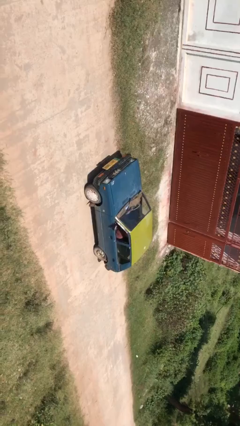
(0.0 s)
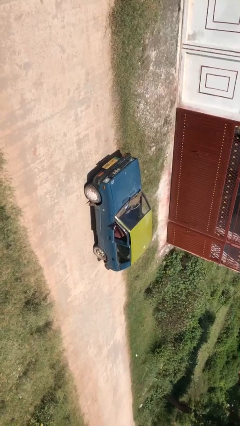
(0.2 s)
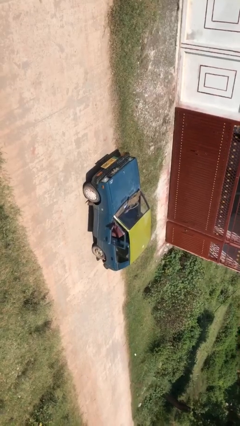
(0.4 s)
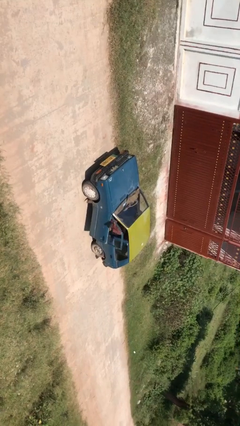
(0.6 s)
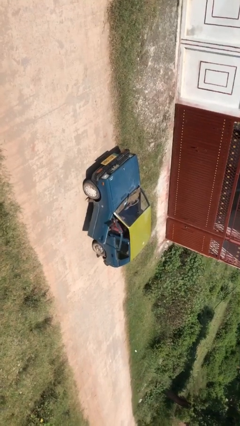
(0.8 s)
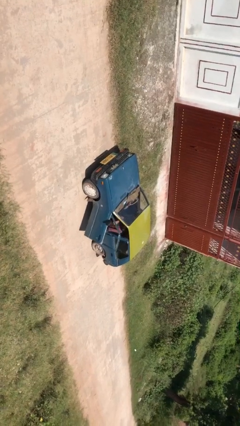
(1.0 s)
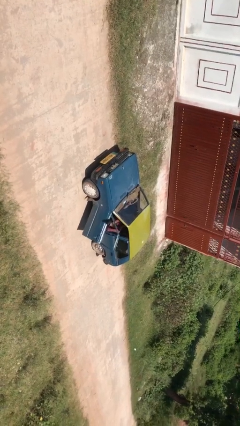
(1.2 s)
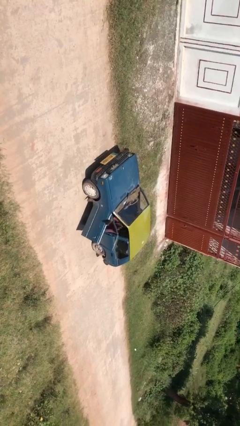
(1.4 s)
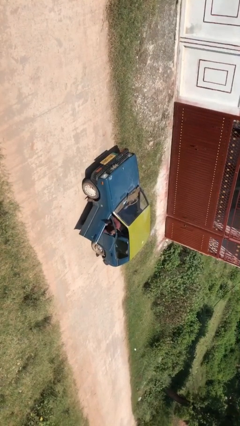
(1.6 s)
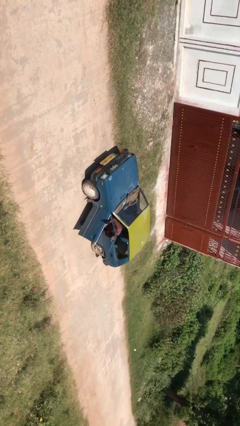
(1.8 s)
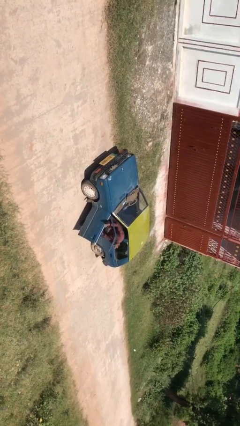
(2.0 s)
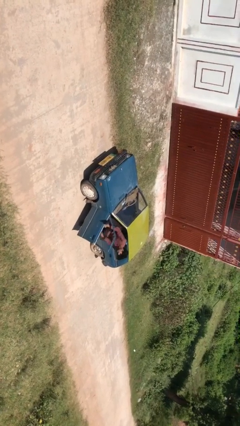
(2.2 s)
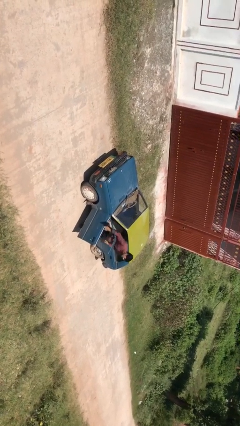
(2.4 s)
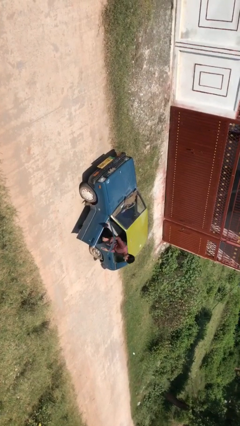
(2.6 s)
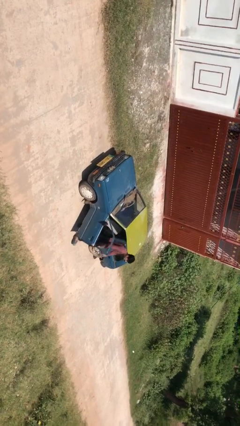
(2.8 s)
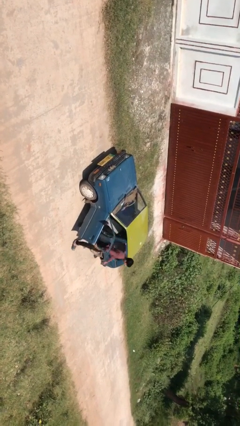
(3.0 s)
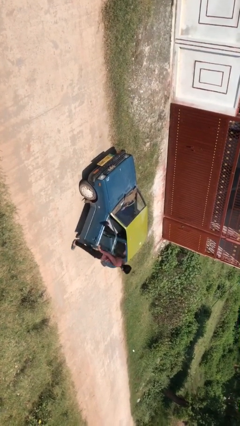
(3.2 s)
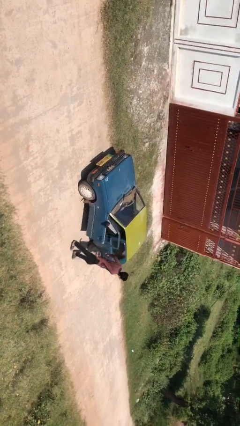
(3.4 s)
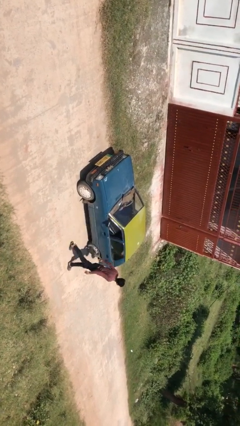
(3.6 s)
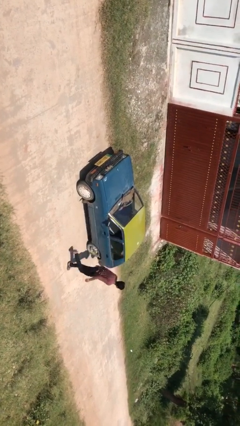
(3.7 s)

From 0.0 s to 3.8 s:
car drops off person

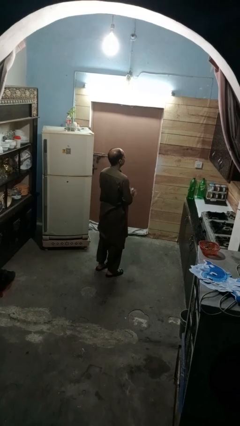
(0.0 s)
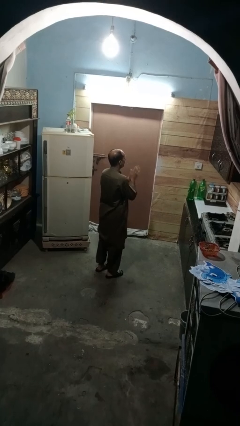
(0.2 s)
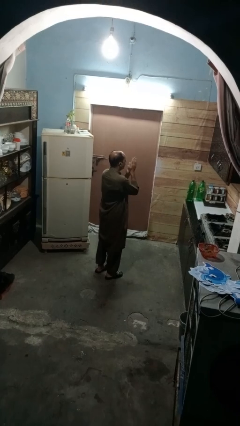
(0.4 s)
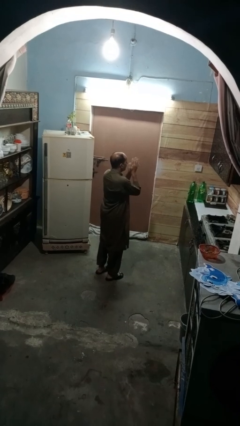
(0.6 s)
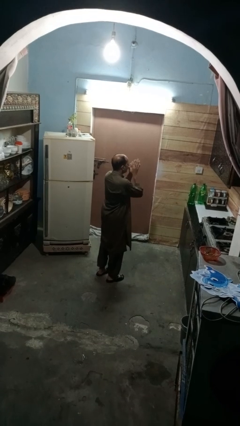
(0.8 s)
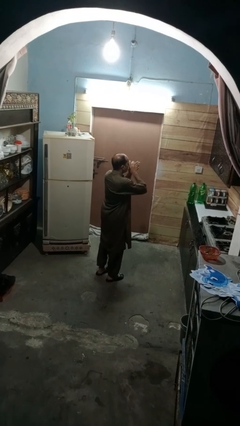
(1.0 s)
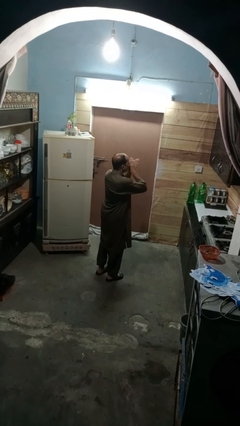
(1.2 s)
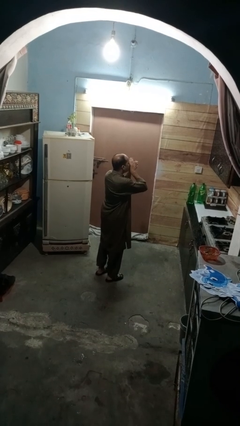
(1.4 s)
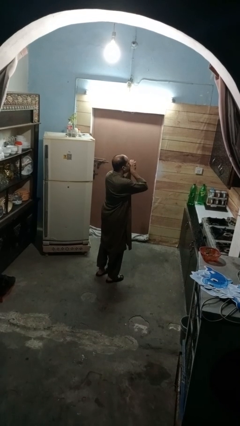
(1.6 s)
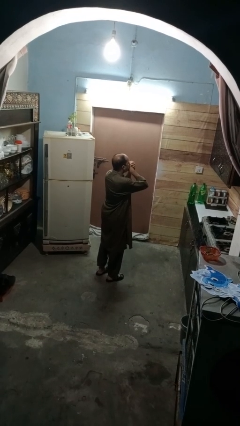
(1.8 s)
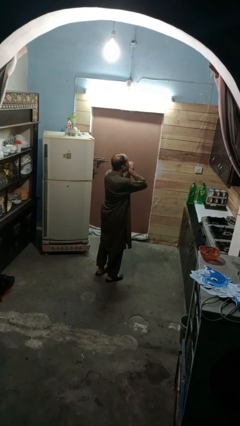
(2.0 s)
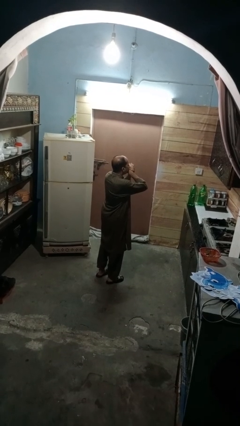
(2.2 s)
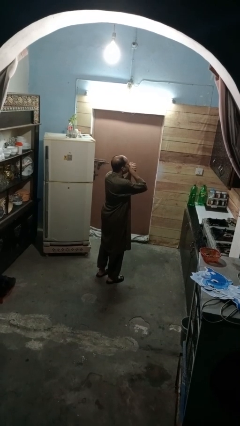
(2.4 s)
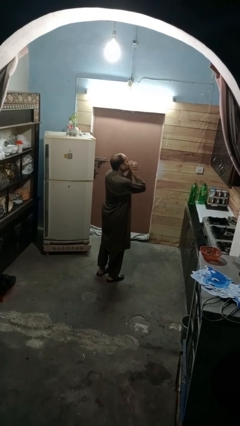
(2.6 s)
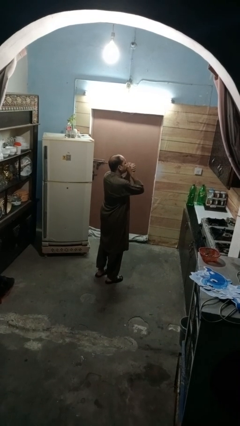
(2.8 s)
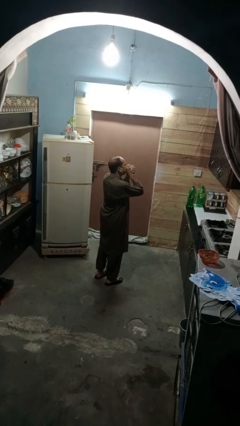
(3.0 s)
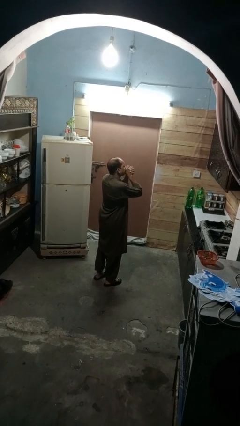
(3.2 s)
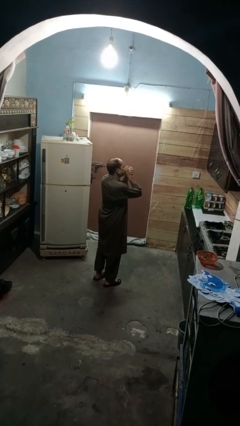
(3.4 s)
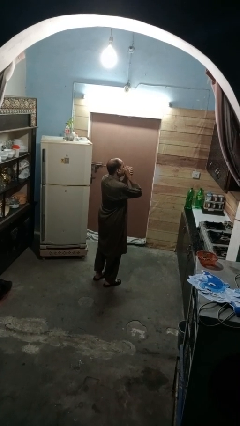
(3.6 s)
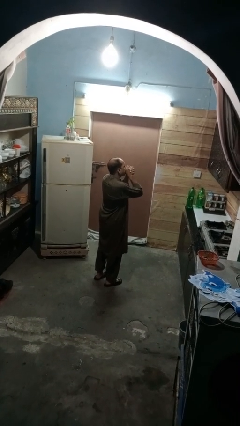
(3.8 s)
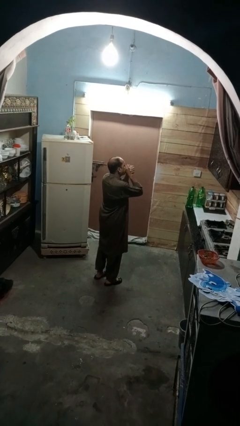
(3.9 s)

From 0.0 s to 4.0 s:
person blows into hands

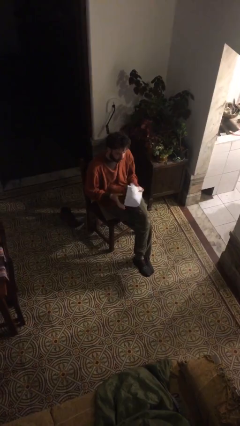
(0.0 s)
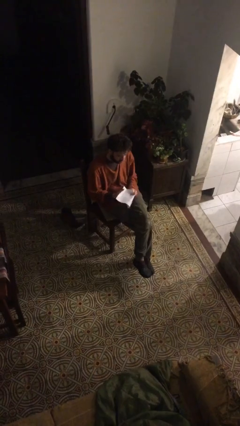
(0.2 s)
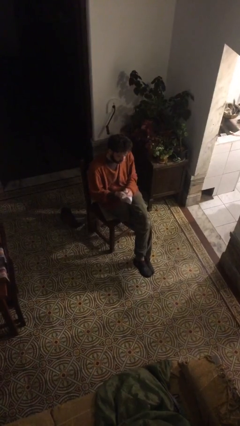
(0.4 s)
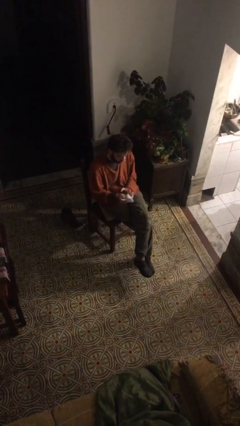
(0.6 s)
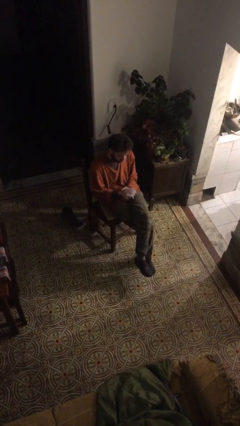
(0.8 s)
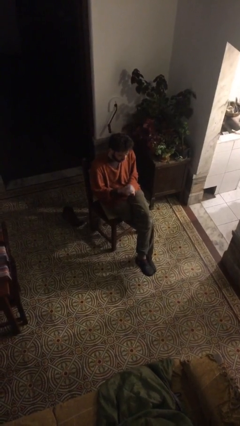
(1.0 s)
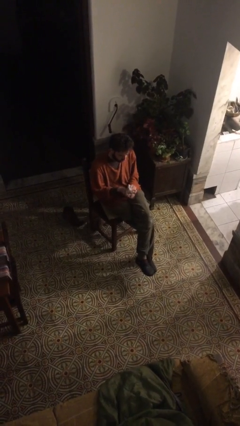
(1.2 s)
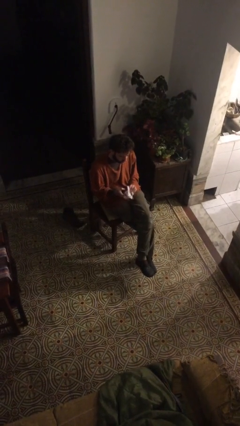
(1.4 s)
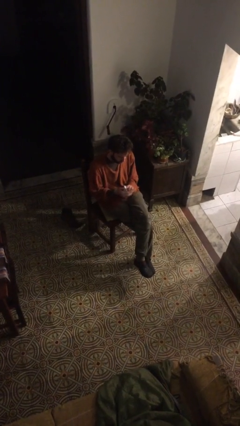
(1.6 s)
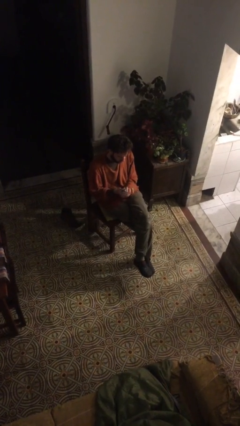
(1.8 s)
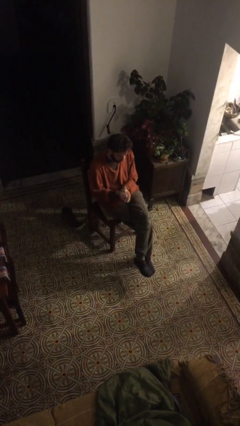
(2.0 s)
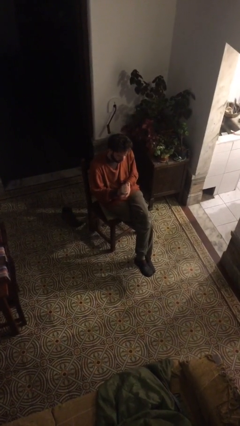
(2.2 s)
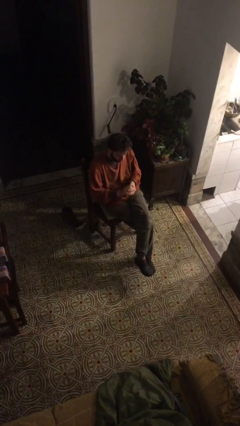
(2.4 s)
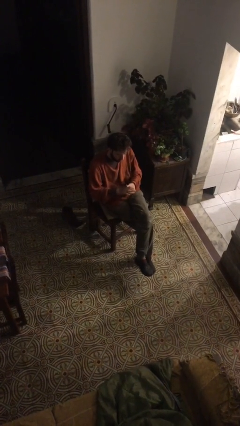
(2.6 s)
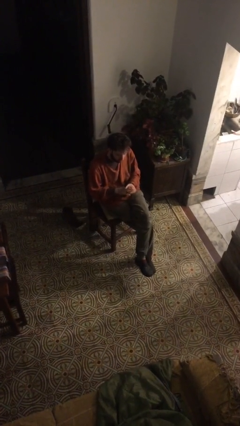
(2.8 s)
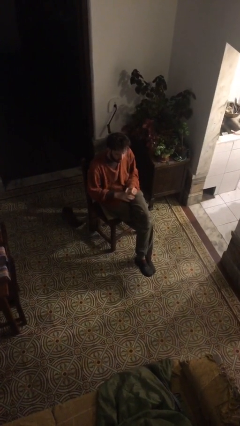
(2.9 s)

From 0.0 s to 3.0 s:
person crumples paper

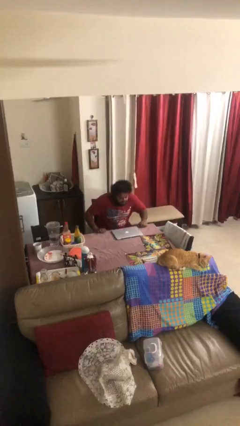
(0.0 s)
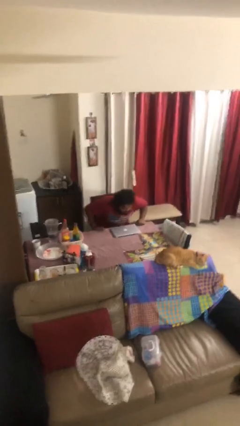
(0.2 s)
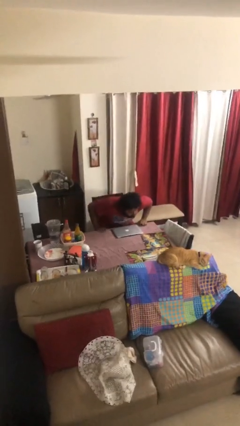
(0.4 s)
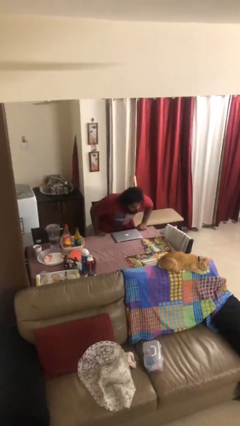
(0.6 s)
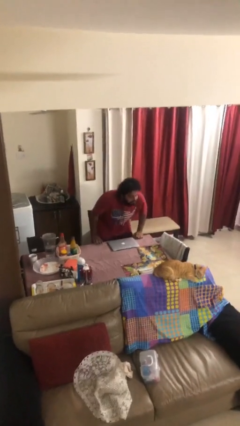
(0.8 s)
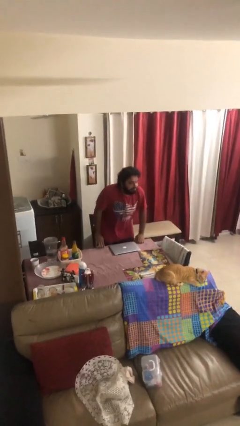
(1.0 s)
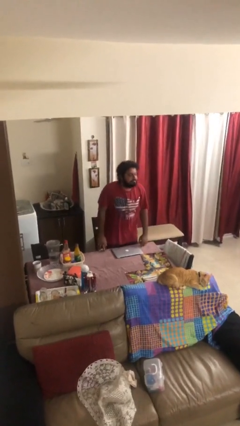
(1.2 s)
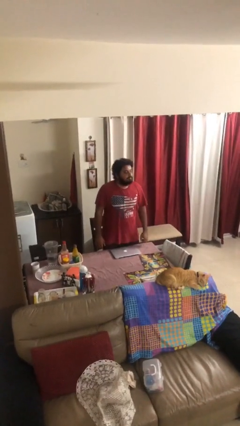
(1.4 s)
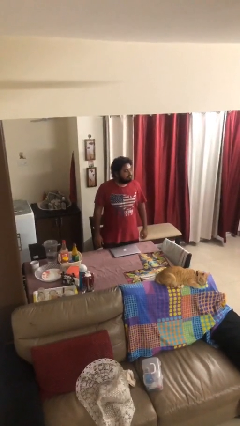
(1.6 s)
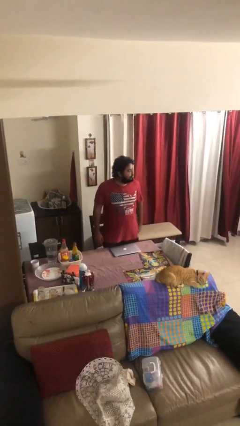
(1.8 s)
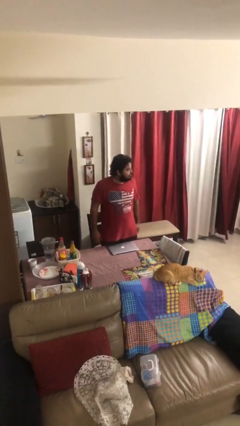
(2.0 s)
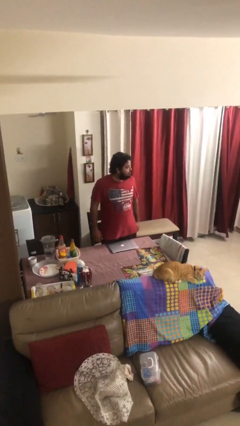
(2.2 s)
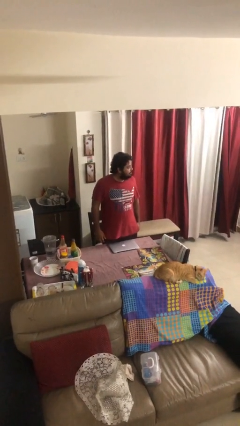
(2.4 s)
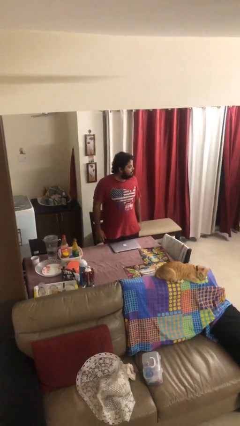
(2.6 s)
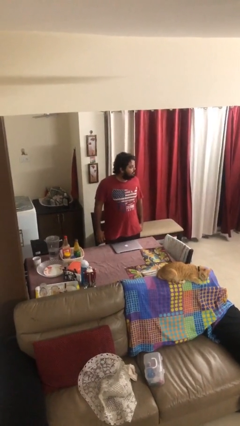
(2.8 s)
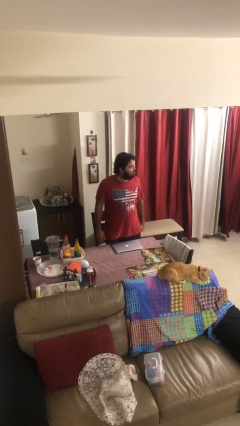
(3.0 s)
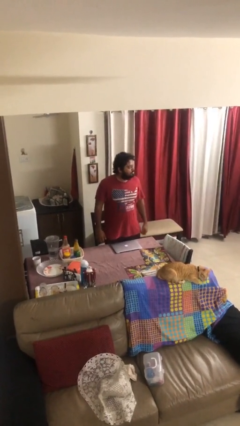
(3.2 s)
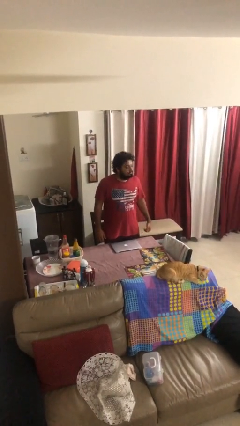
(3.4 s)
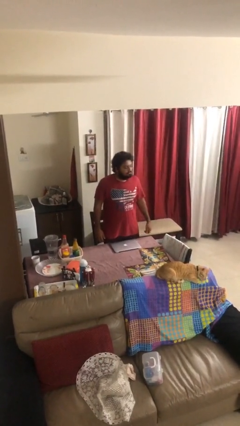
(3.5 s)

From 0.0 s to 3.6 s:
person stands up

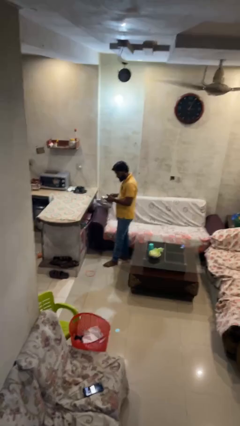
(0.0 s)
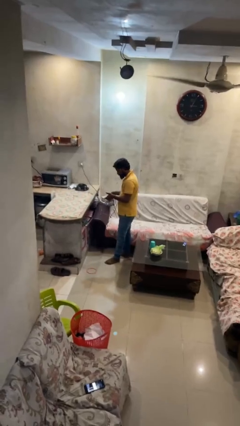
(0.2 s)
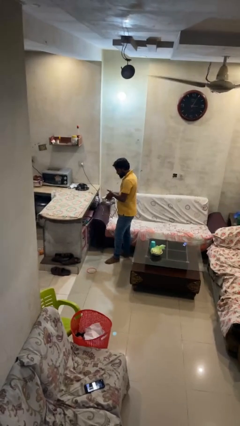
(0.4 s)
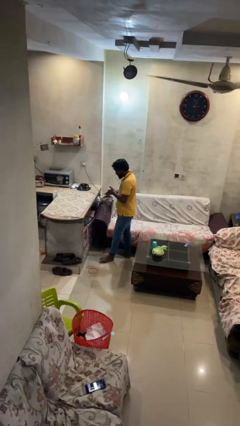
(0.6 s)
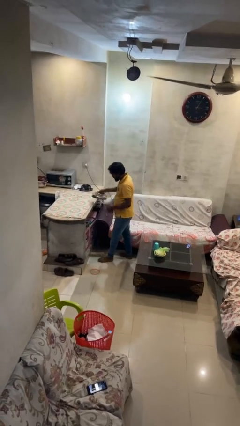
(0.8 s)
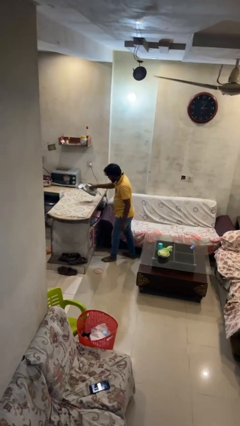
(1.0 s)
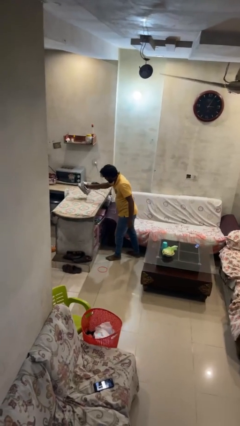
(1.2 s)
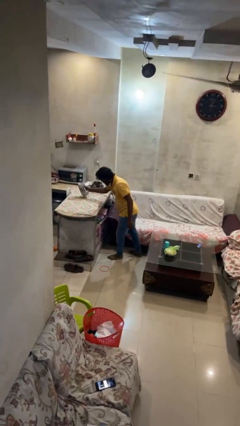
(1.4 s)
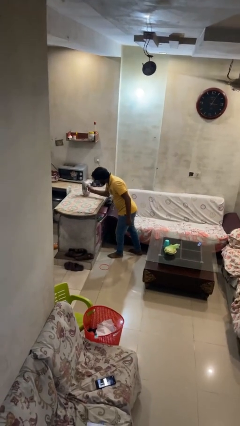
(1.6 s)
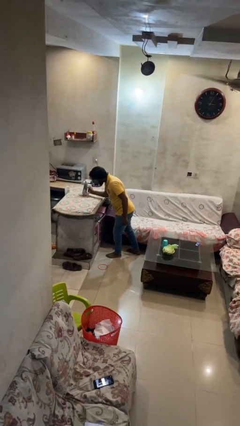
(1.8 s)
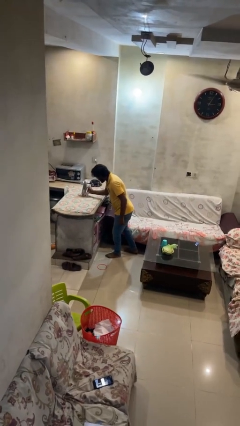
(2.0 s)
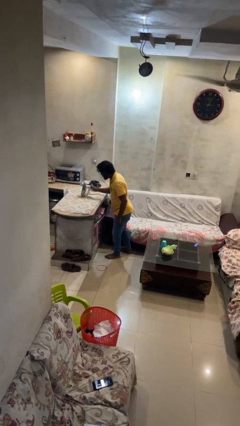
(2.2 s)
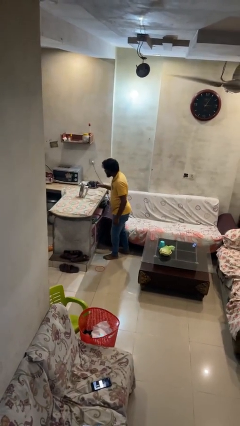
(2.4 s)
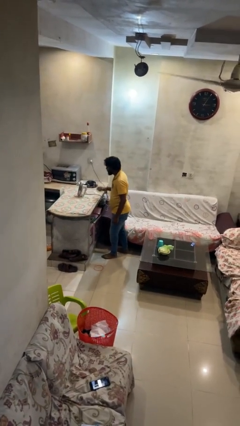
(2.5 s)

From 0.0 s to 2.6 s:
person puts down object on countertop
